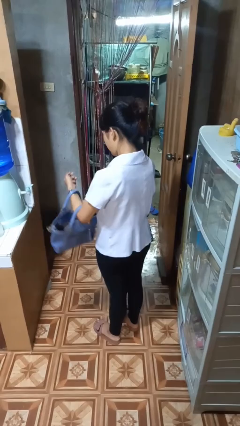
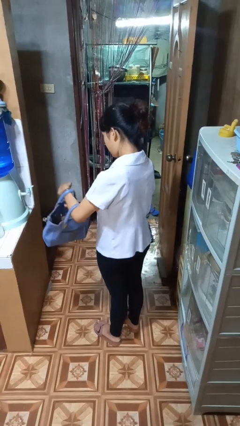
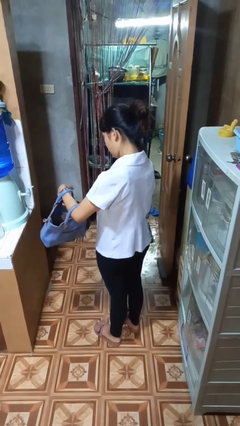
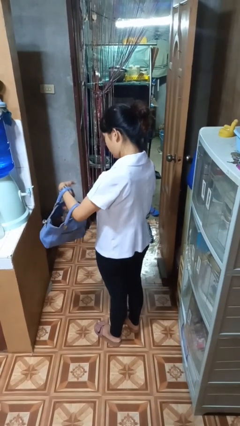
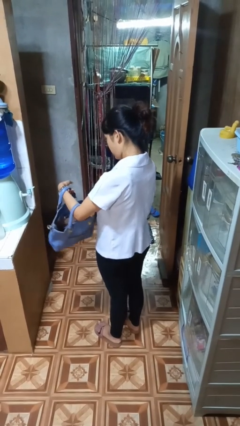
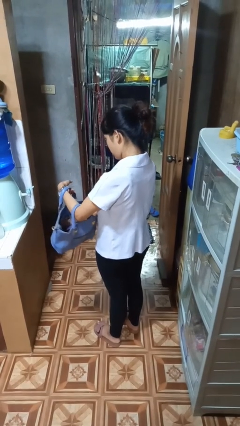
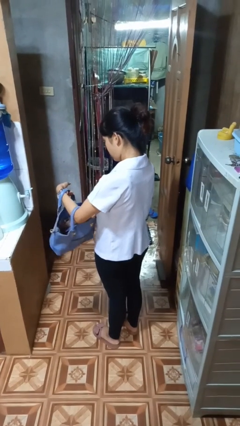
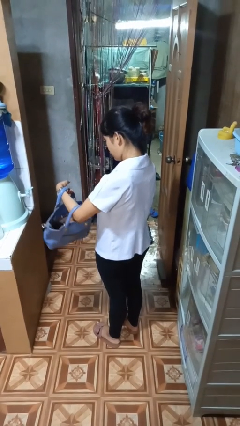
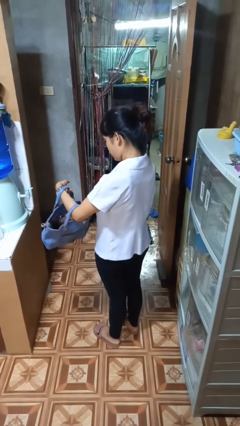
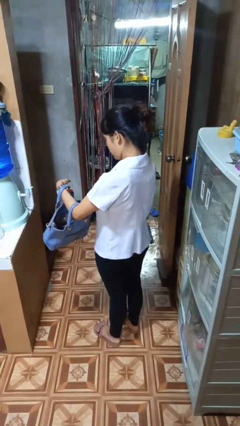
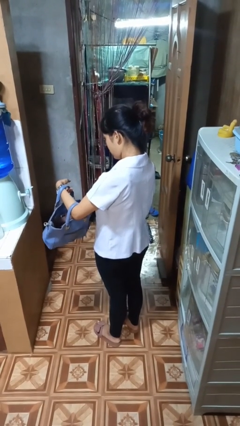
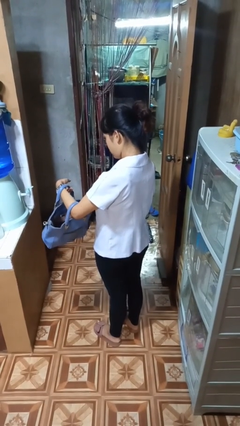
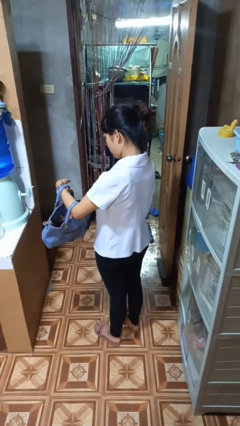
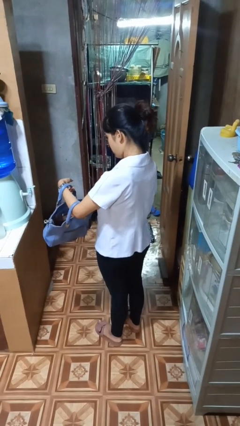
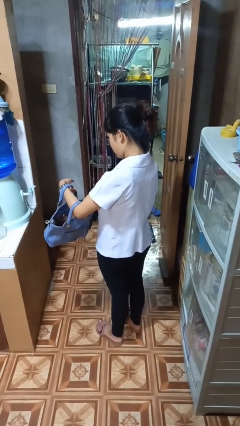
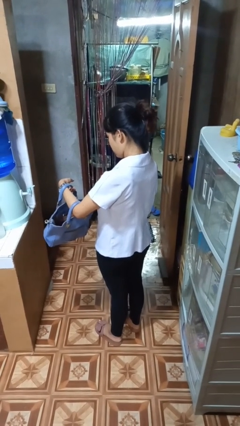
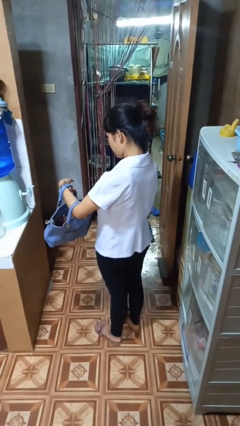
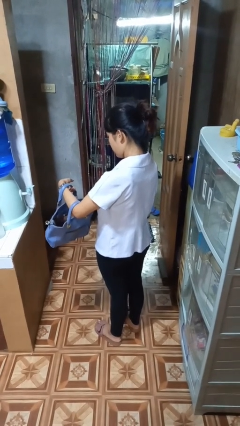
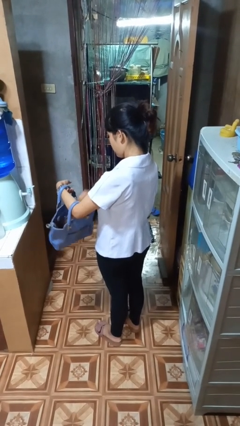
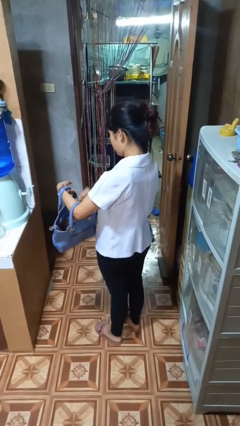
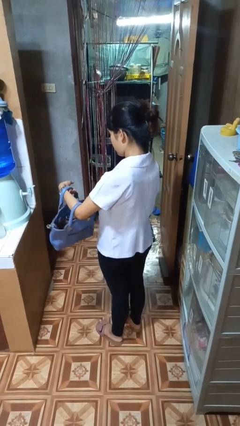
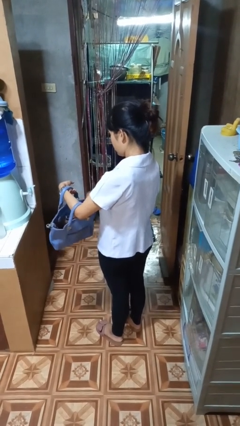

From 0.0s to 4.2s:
person searches in purse

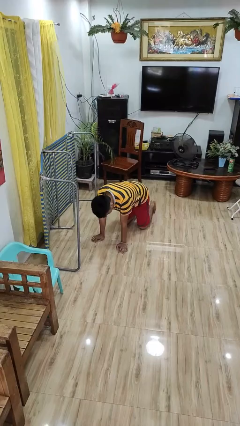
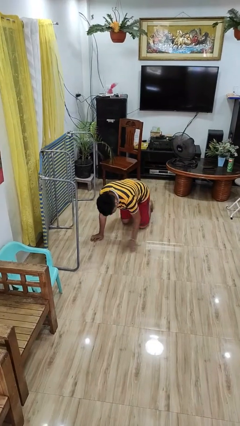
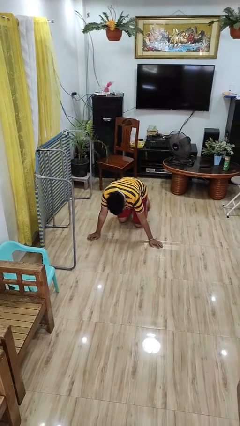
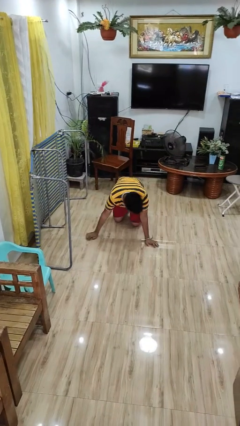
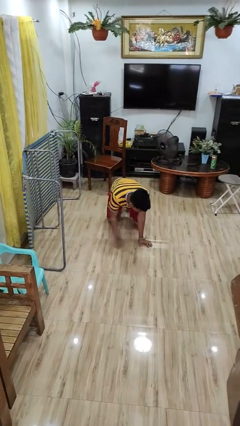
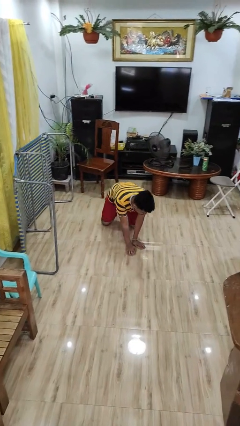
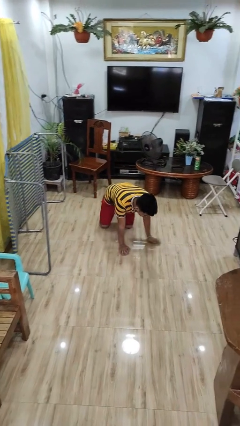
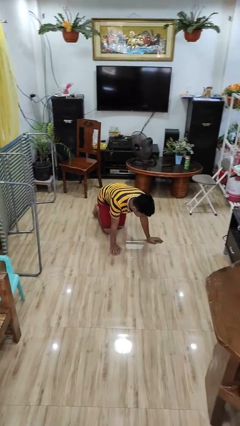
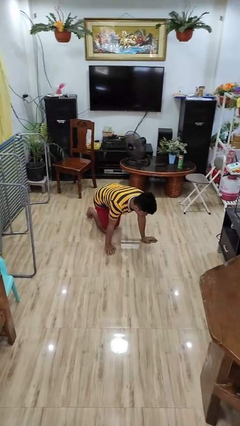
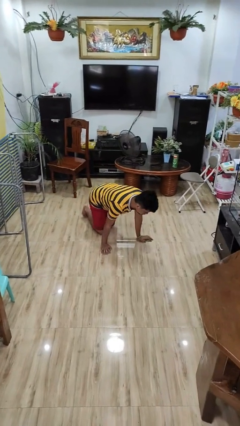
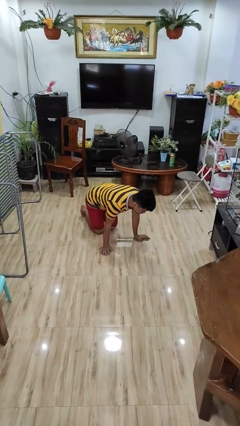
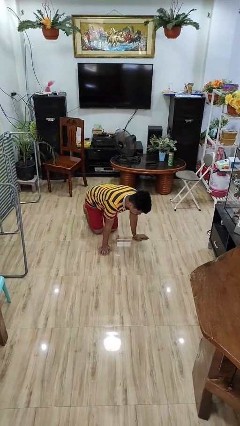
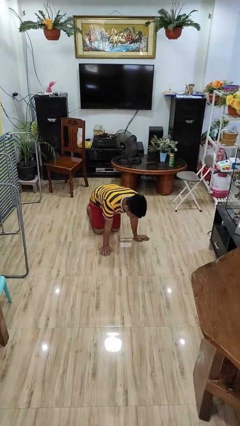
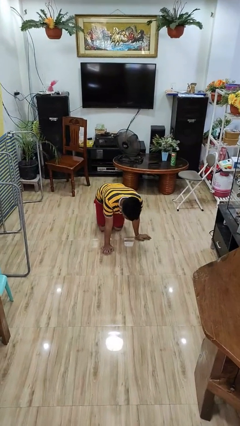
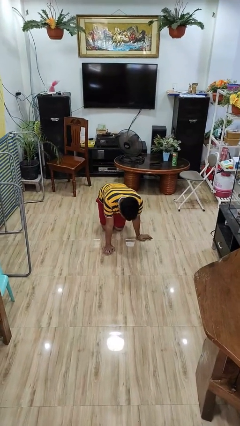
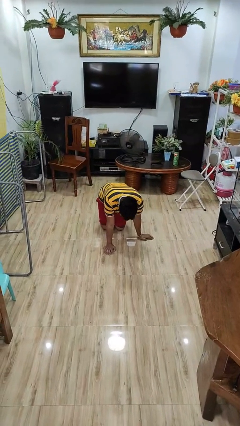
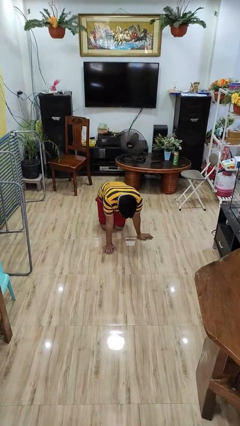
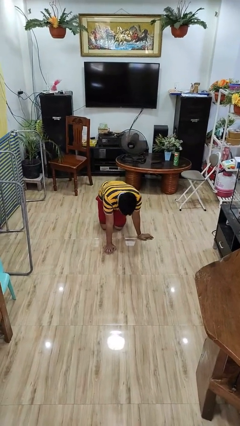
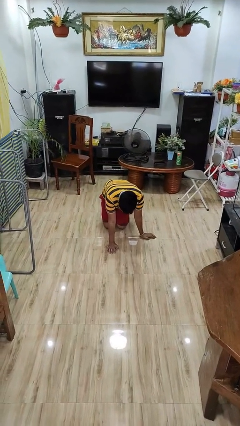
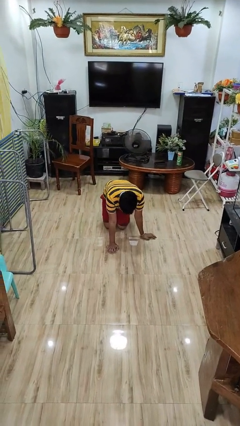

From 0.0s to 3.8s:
person crawls

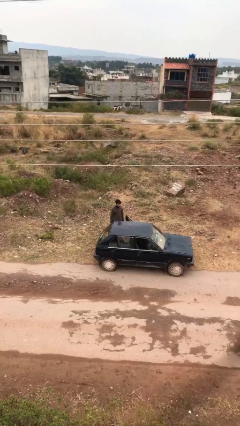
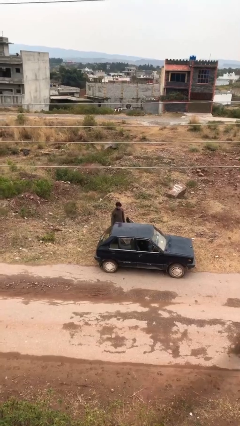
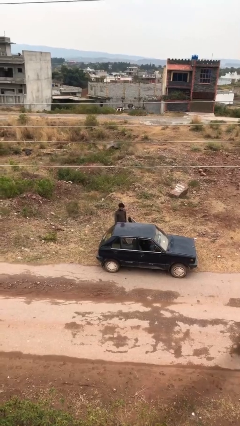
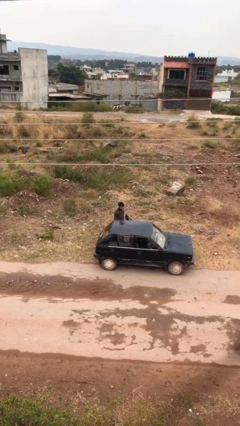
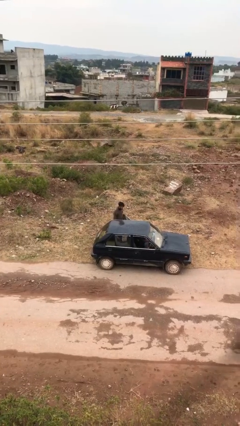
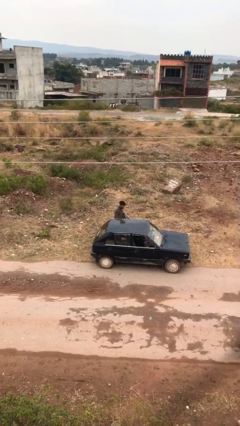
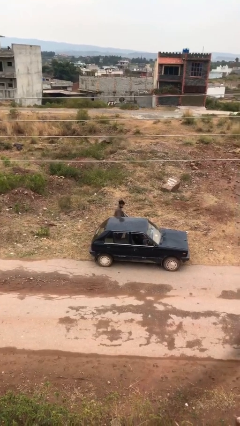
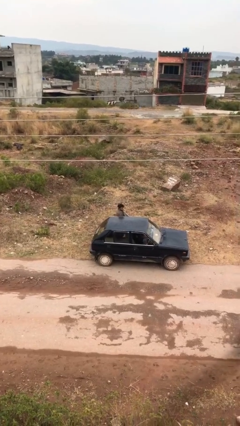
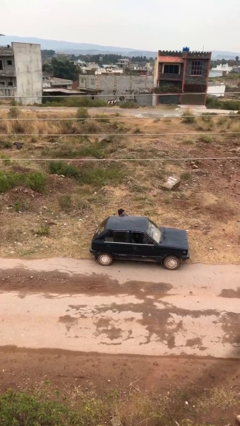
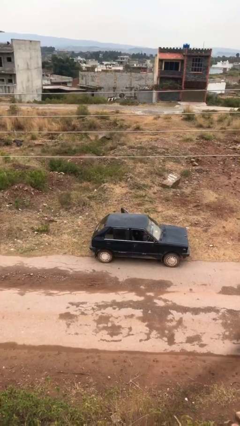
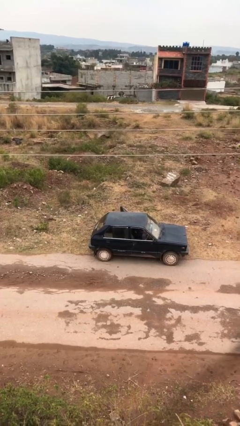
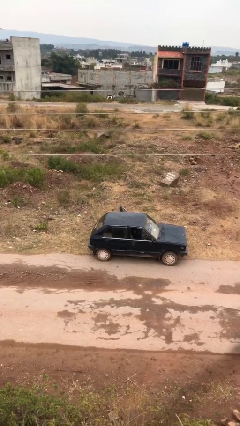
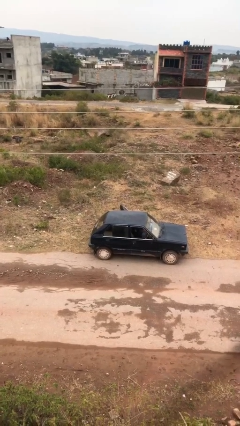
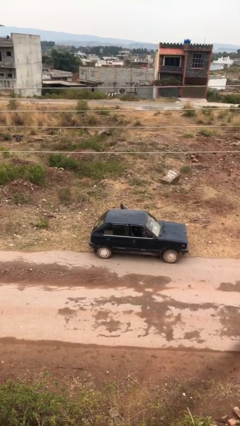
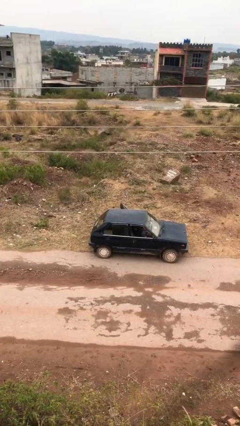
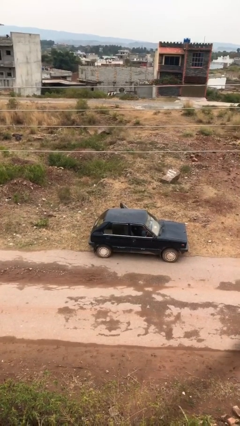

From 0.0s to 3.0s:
person enters car

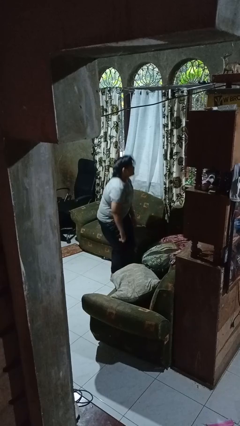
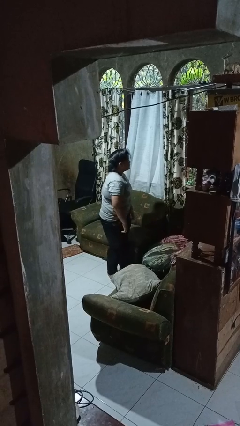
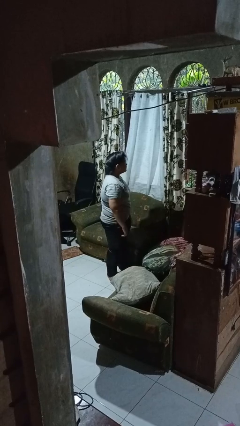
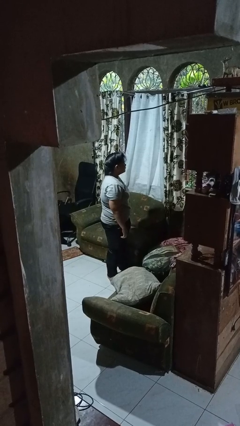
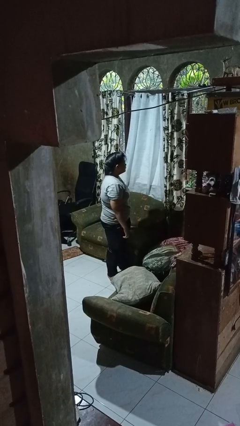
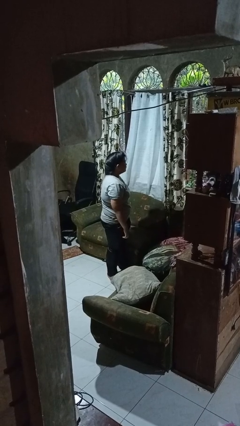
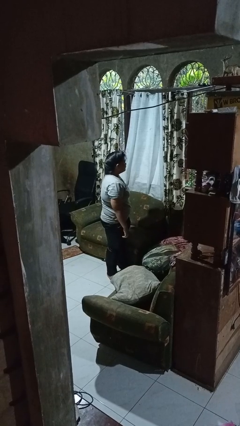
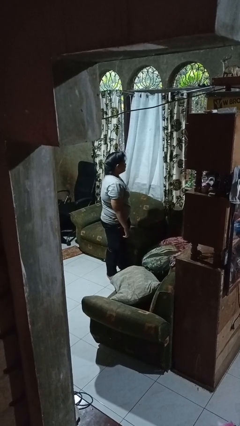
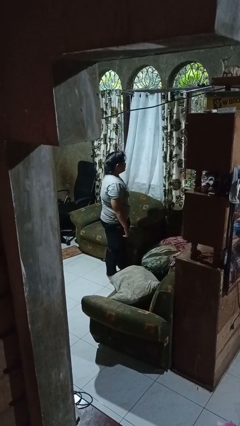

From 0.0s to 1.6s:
person stands up

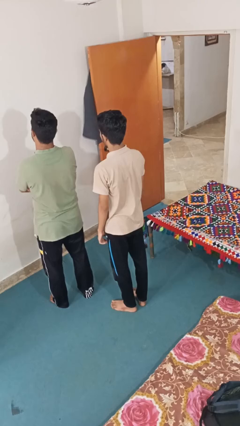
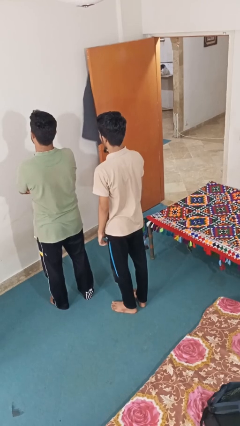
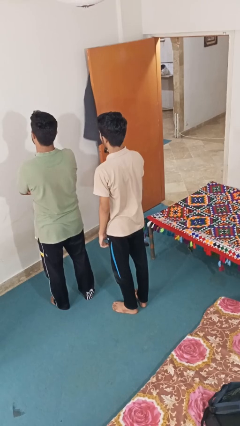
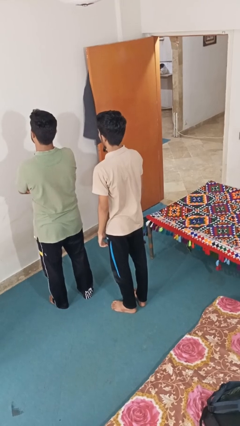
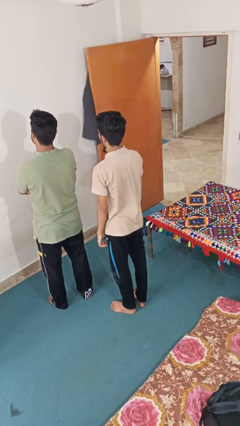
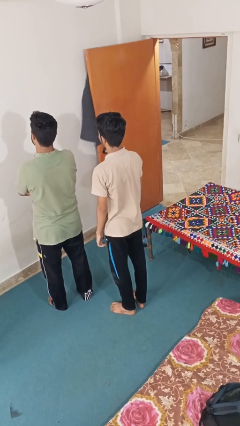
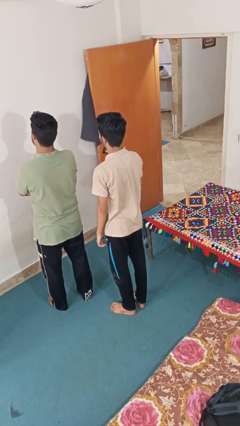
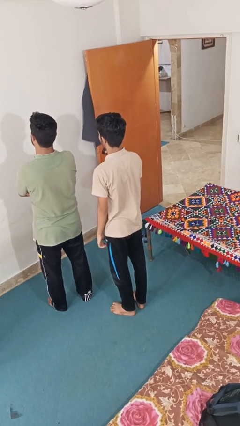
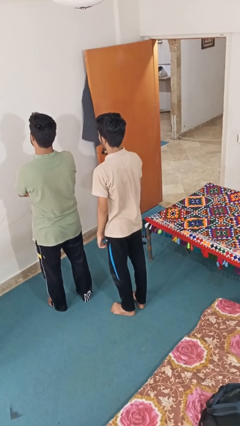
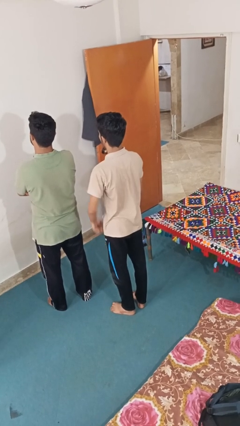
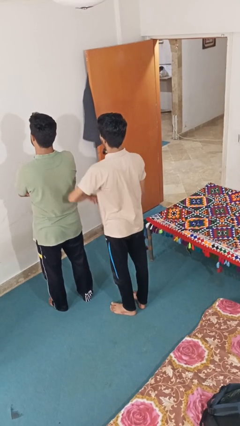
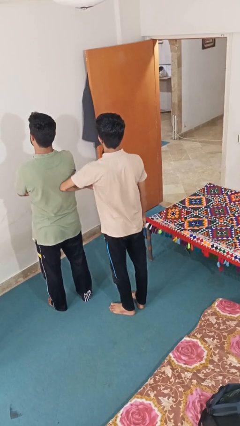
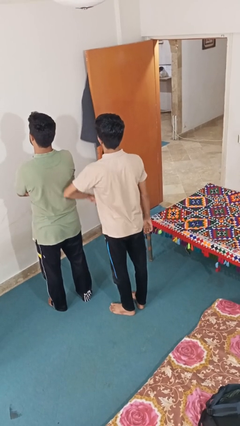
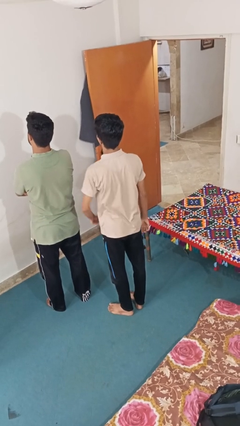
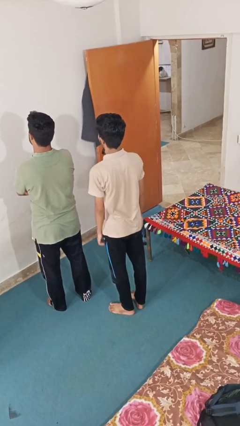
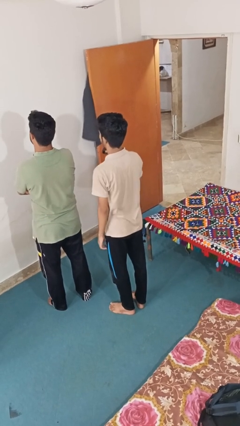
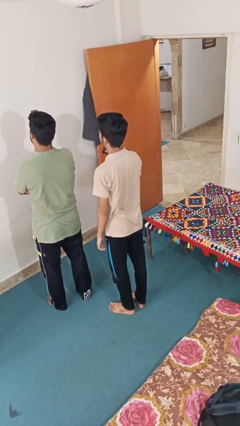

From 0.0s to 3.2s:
person nudges person with elbow

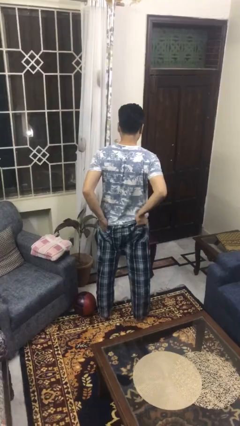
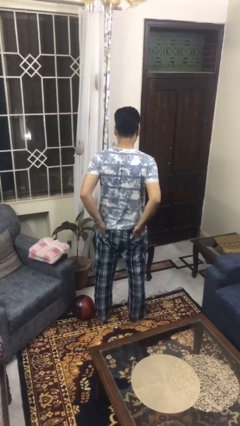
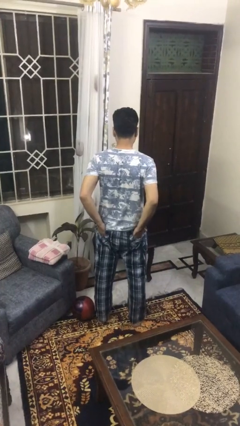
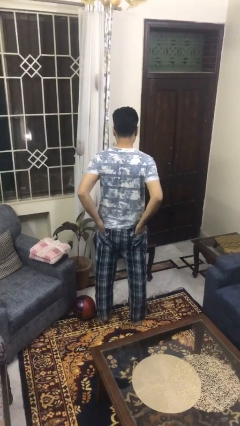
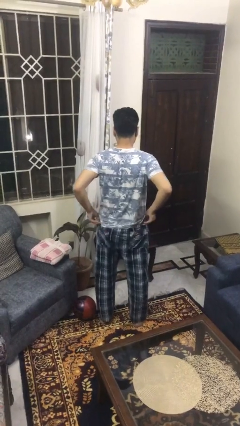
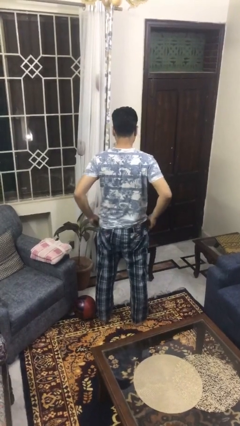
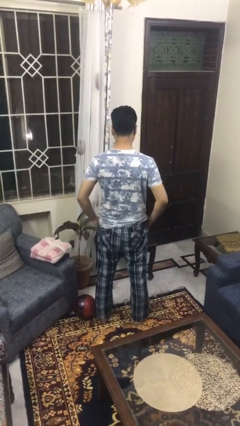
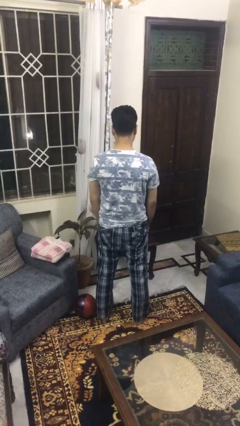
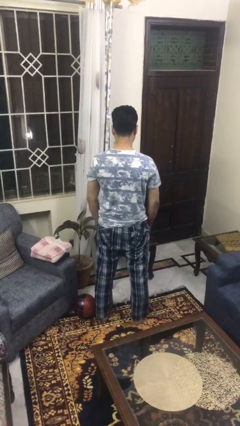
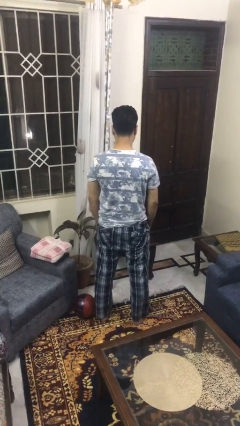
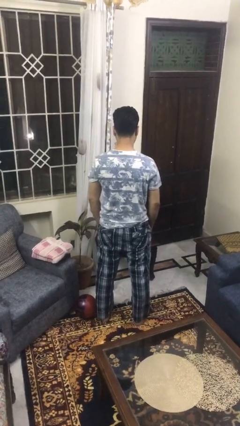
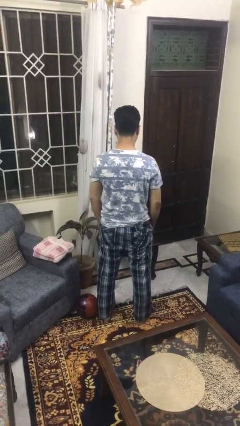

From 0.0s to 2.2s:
person puts hands in back pockets
